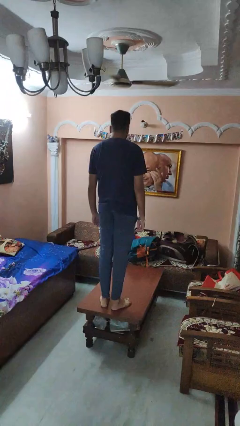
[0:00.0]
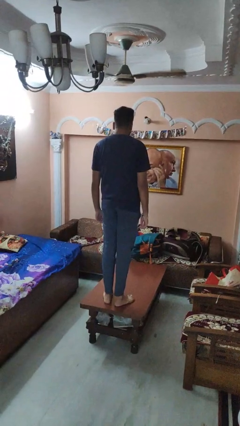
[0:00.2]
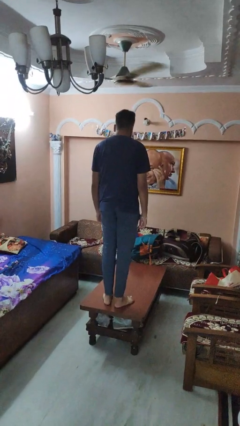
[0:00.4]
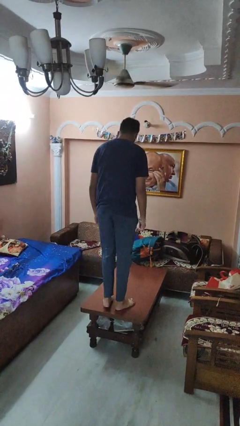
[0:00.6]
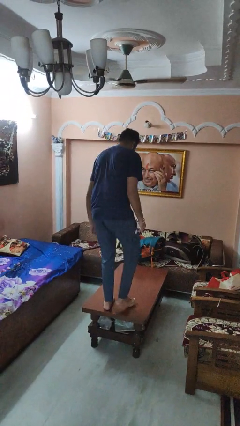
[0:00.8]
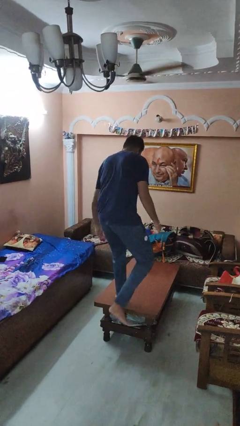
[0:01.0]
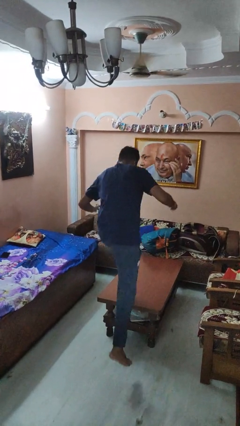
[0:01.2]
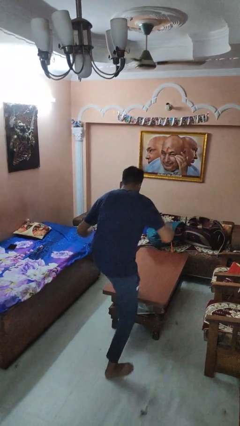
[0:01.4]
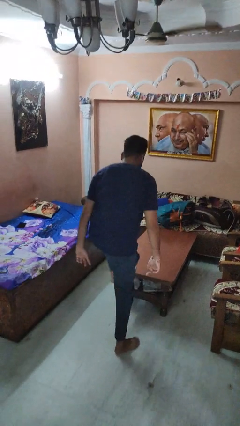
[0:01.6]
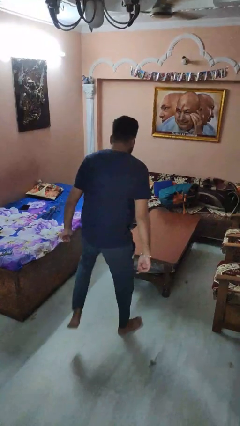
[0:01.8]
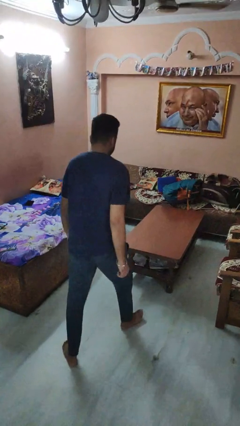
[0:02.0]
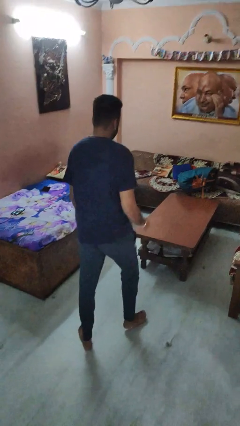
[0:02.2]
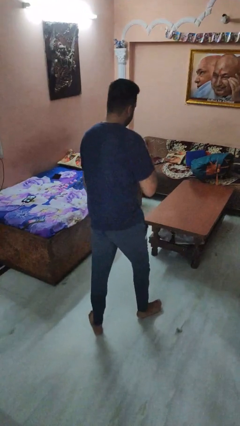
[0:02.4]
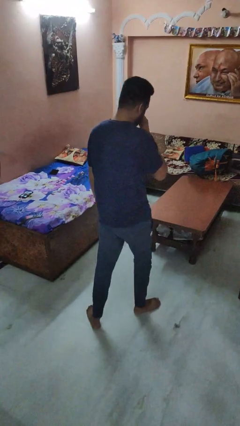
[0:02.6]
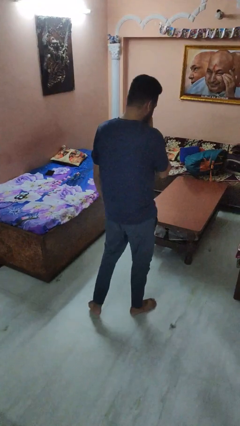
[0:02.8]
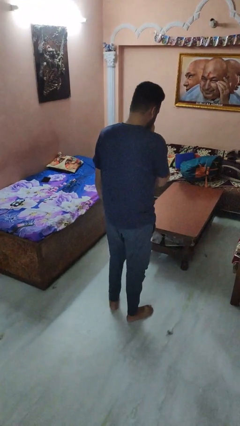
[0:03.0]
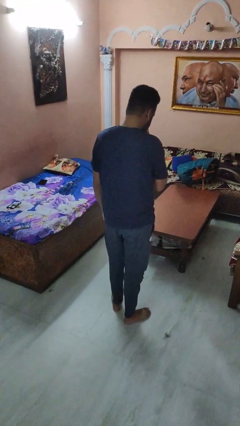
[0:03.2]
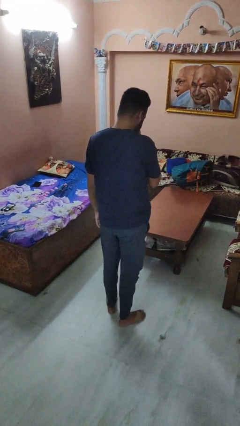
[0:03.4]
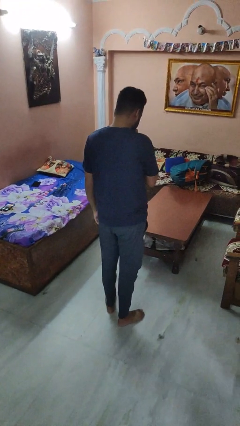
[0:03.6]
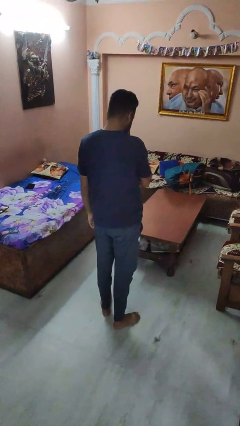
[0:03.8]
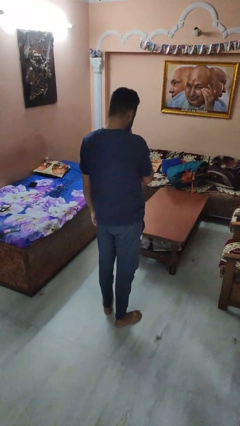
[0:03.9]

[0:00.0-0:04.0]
person climbs off table

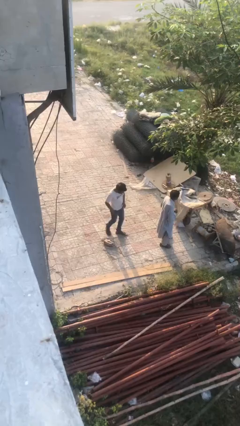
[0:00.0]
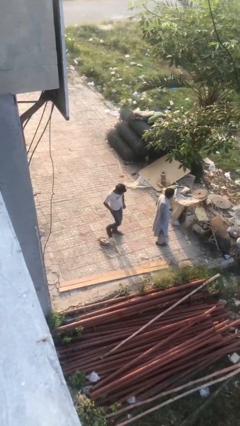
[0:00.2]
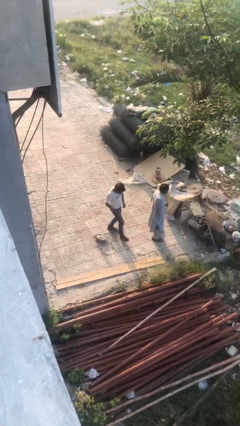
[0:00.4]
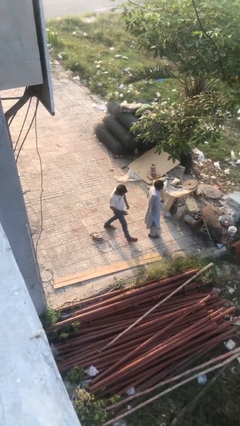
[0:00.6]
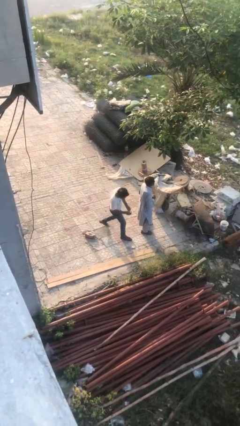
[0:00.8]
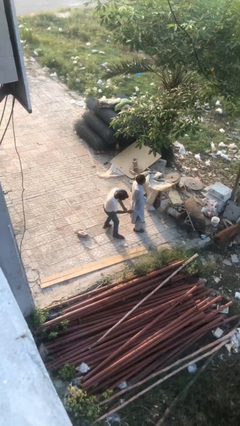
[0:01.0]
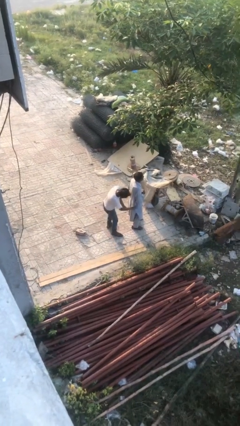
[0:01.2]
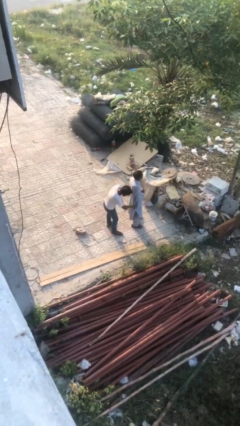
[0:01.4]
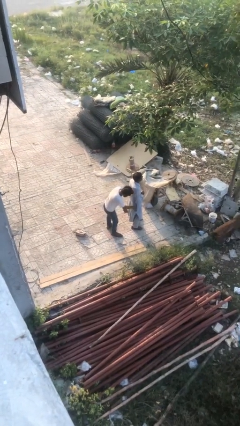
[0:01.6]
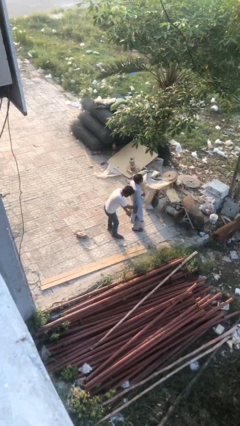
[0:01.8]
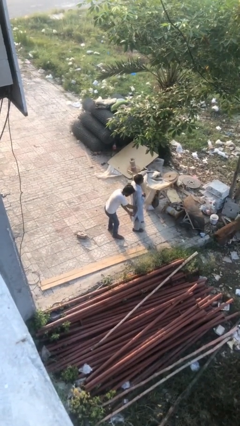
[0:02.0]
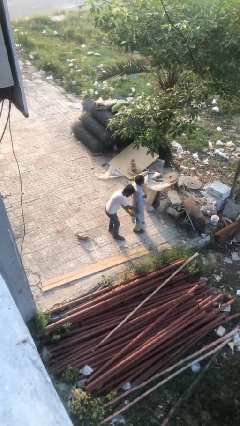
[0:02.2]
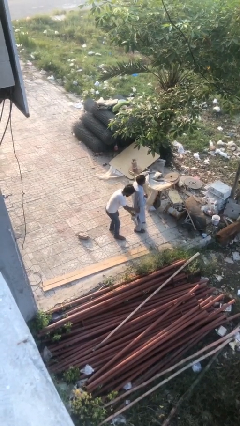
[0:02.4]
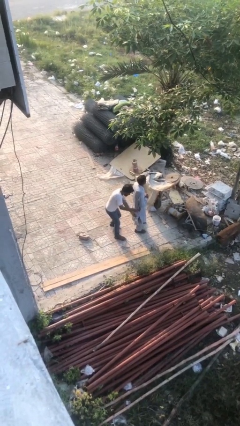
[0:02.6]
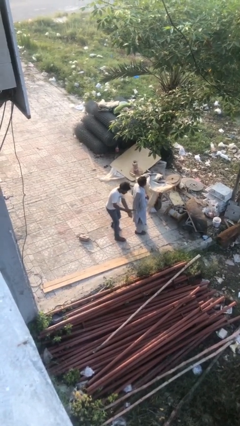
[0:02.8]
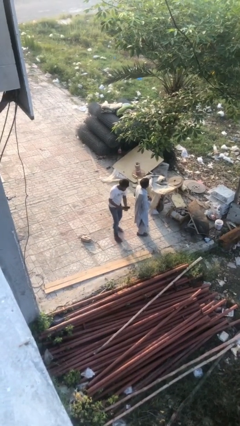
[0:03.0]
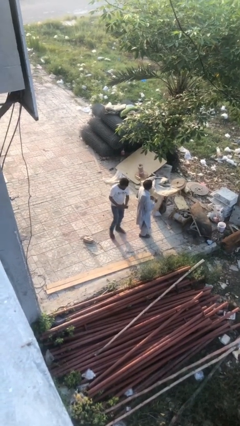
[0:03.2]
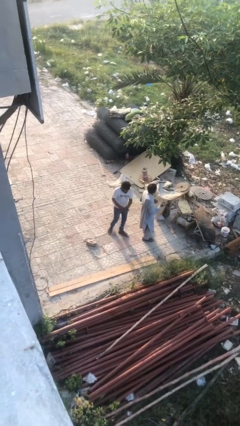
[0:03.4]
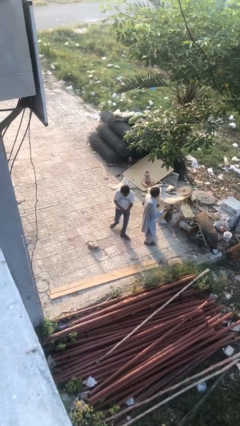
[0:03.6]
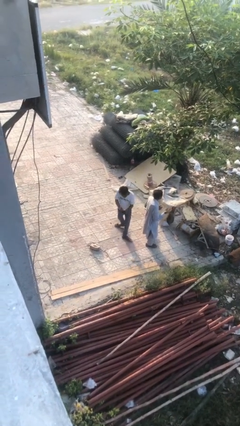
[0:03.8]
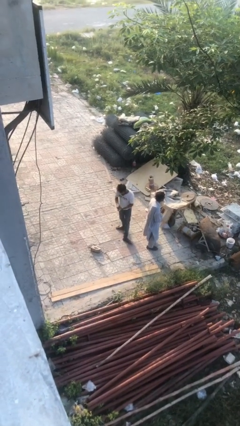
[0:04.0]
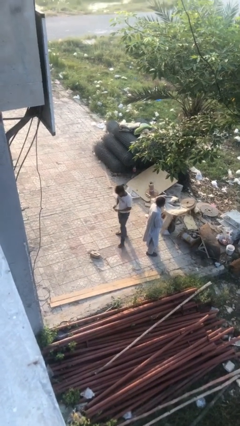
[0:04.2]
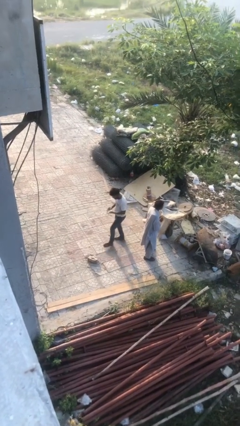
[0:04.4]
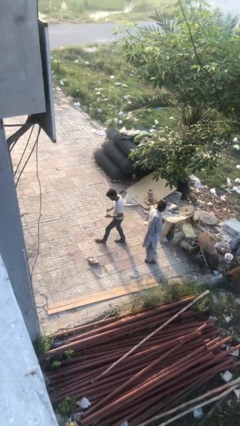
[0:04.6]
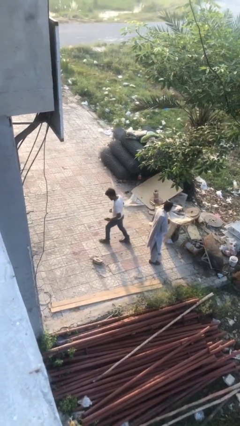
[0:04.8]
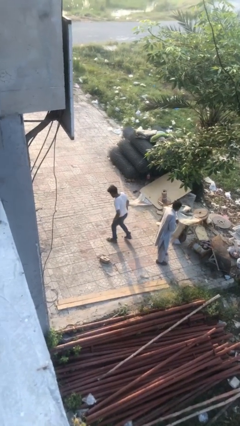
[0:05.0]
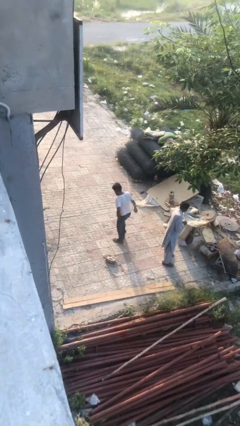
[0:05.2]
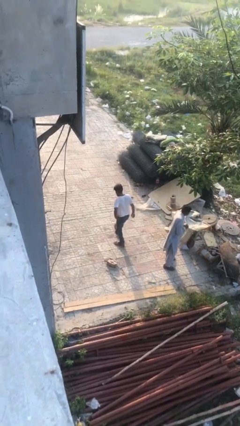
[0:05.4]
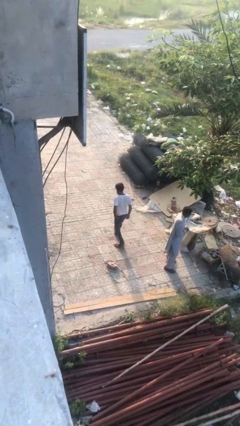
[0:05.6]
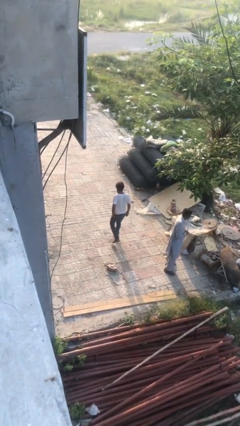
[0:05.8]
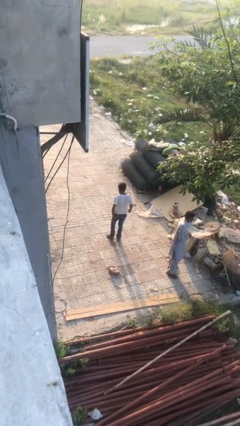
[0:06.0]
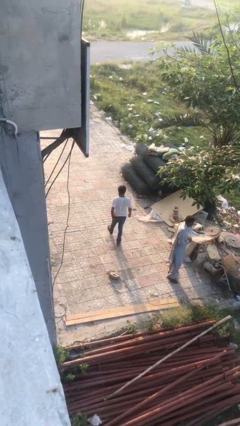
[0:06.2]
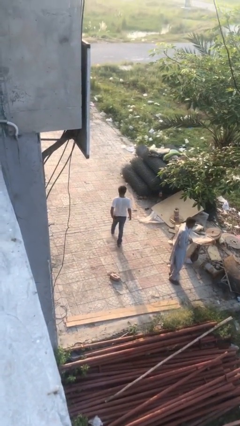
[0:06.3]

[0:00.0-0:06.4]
person steals object from person

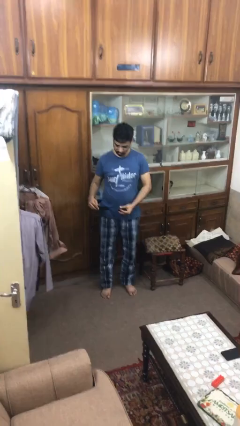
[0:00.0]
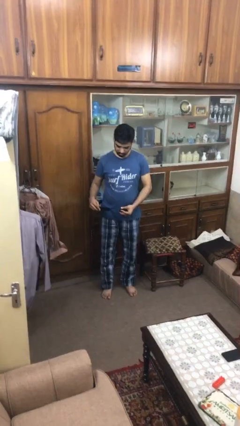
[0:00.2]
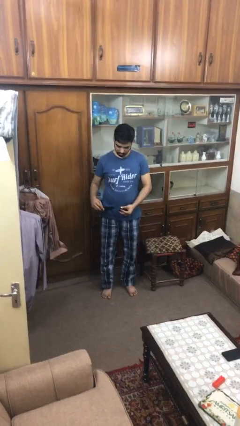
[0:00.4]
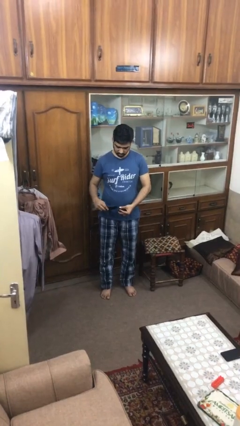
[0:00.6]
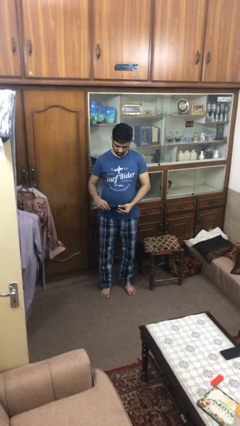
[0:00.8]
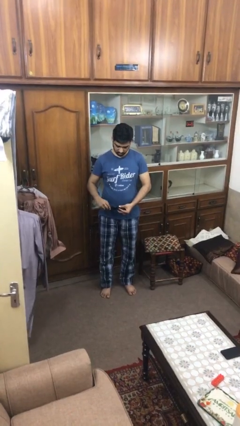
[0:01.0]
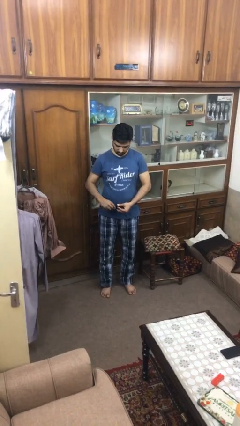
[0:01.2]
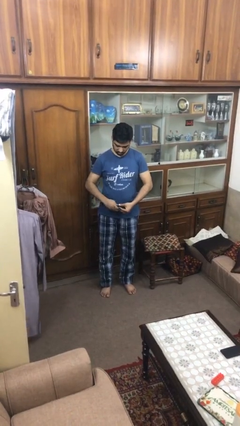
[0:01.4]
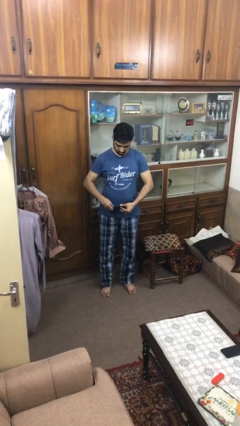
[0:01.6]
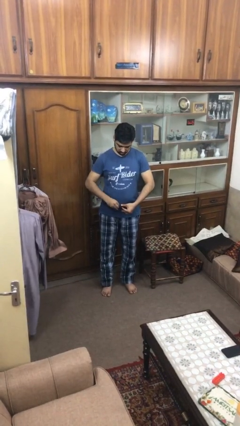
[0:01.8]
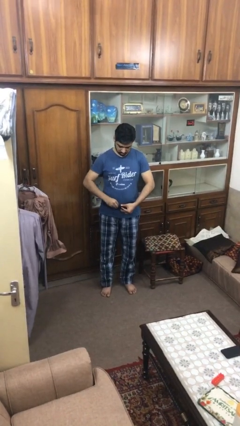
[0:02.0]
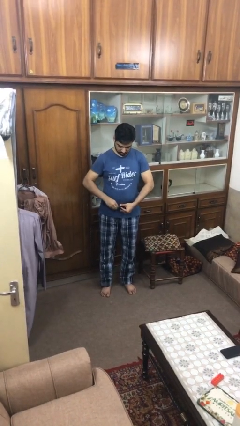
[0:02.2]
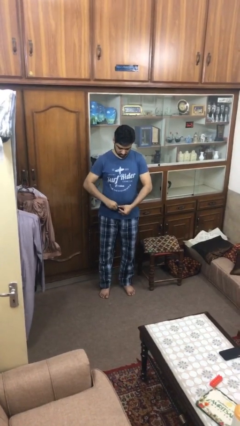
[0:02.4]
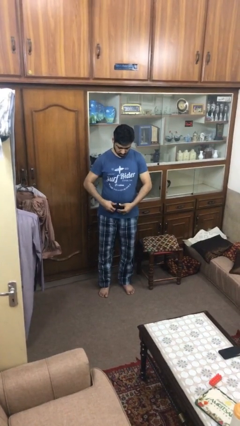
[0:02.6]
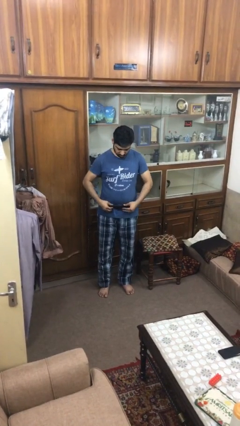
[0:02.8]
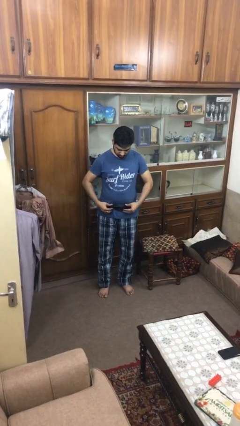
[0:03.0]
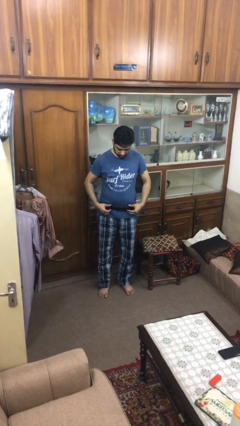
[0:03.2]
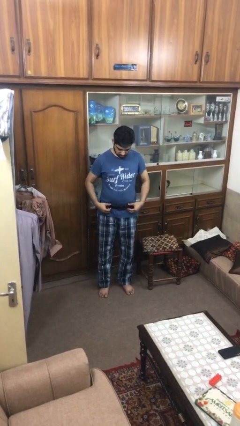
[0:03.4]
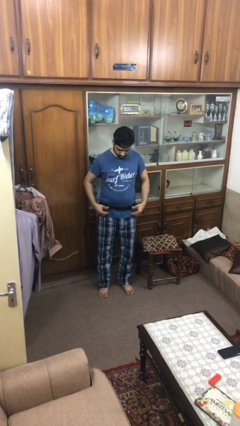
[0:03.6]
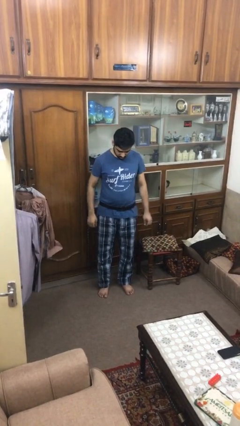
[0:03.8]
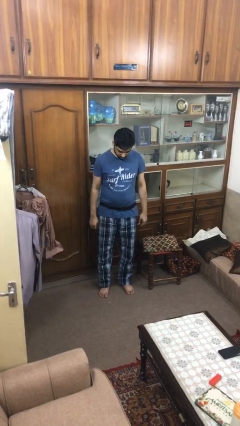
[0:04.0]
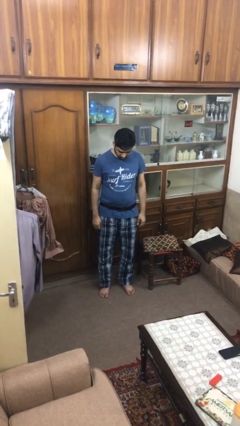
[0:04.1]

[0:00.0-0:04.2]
person puts on belt

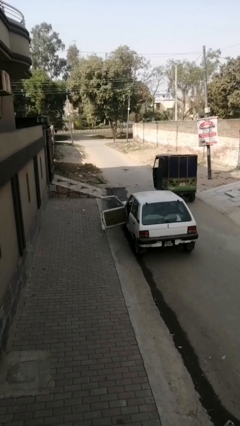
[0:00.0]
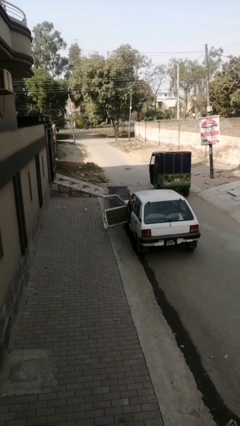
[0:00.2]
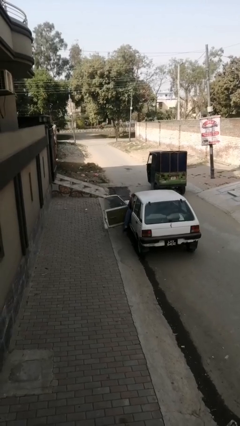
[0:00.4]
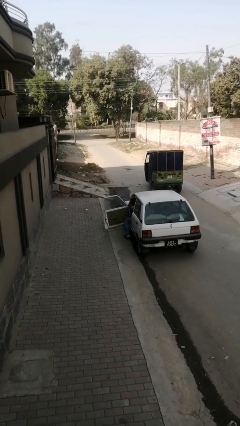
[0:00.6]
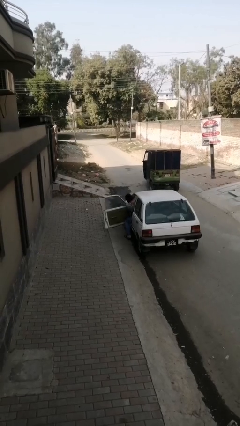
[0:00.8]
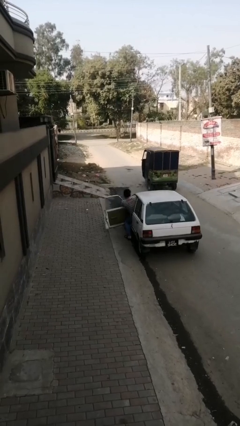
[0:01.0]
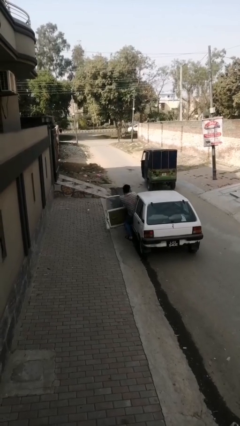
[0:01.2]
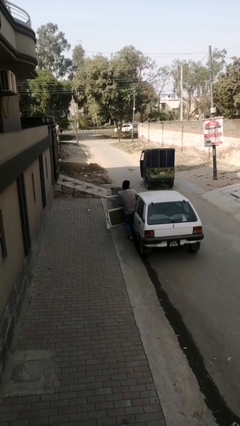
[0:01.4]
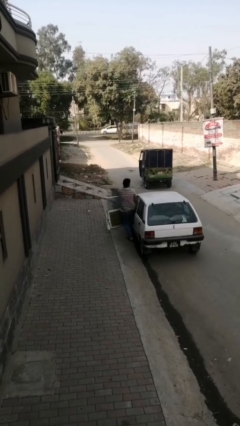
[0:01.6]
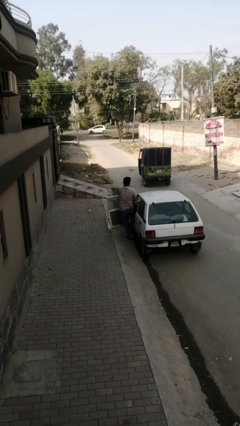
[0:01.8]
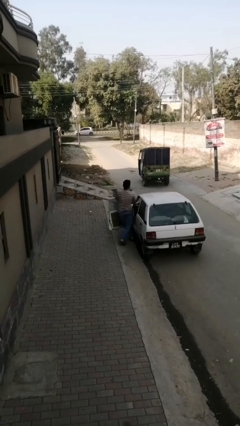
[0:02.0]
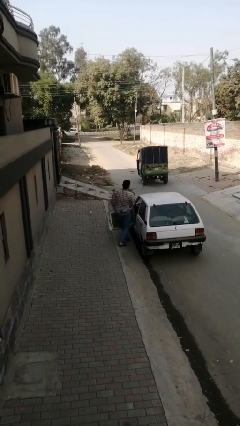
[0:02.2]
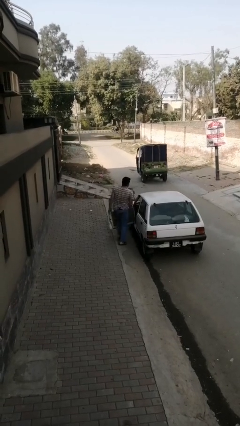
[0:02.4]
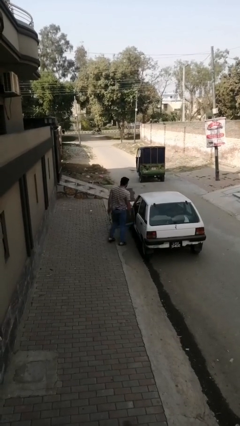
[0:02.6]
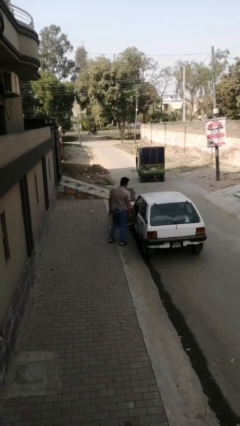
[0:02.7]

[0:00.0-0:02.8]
person exits car

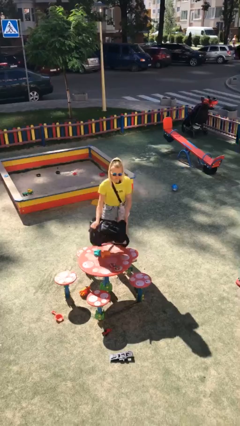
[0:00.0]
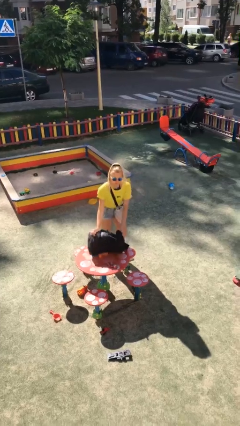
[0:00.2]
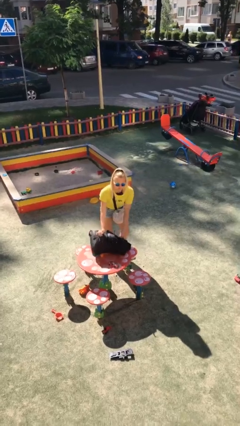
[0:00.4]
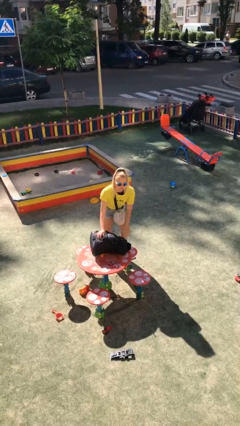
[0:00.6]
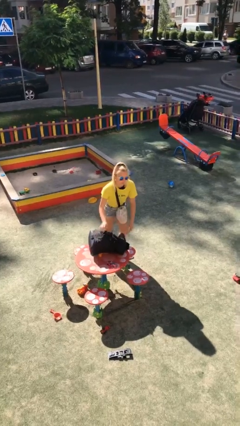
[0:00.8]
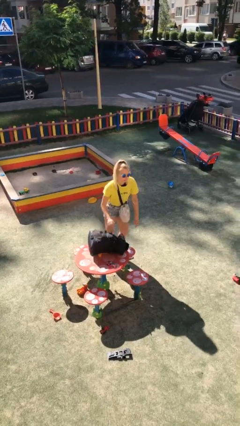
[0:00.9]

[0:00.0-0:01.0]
person puts down object on table
